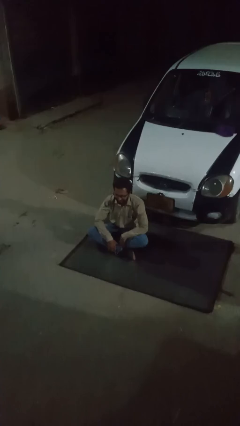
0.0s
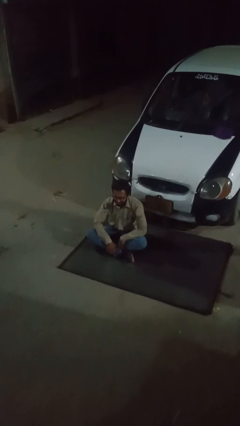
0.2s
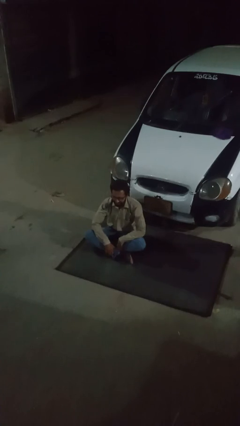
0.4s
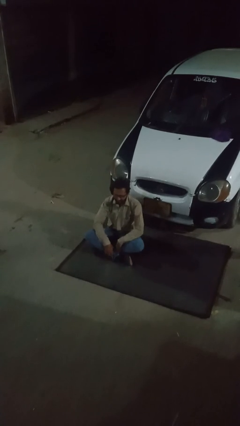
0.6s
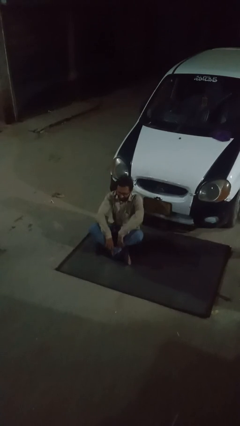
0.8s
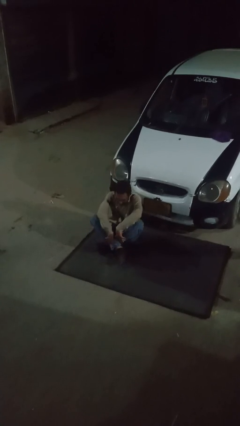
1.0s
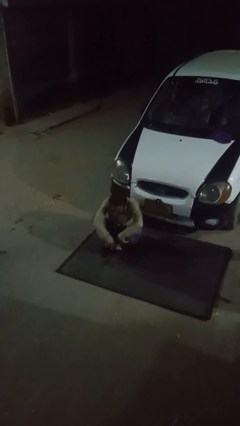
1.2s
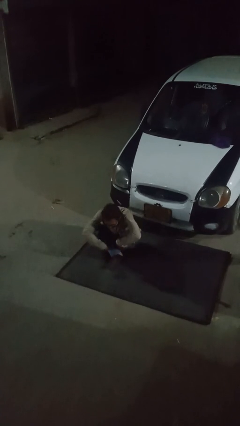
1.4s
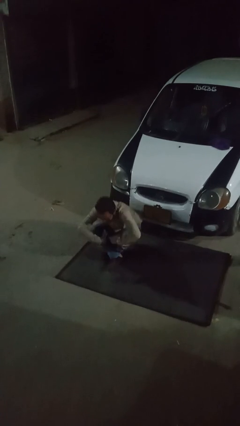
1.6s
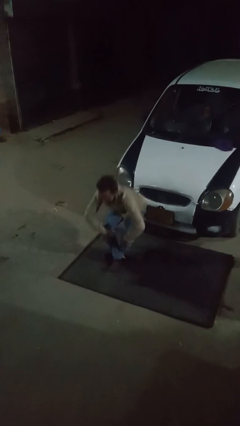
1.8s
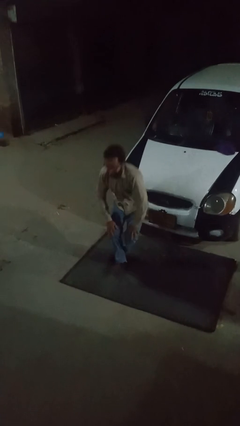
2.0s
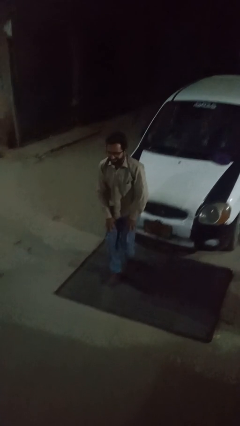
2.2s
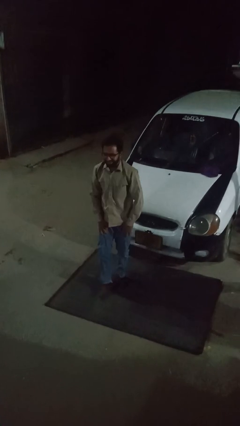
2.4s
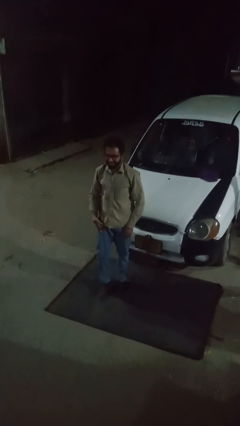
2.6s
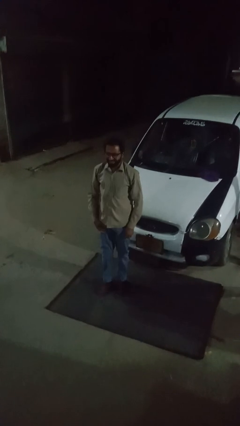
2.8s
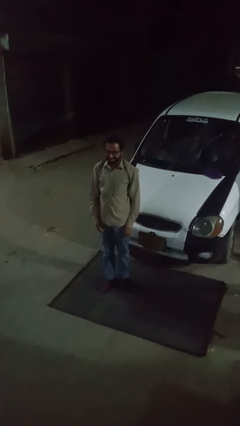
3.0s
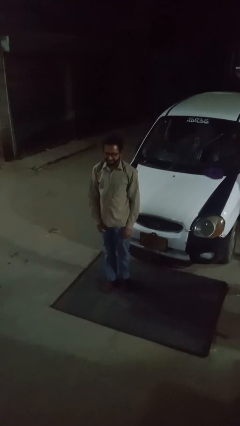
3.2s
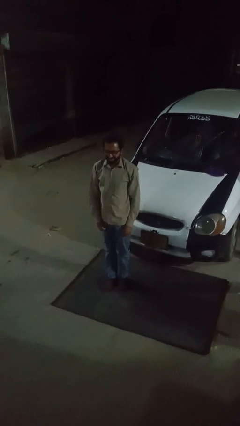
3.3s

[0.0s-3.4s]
person stands up from floor

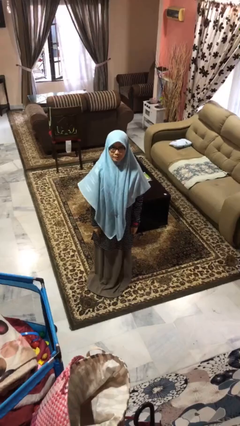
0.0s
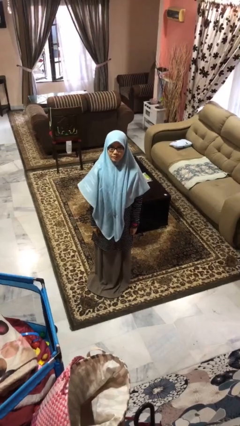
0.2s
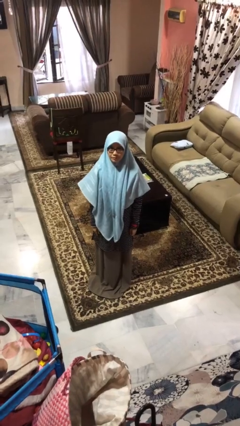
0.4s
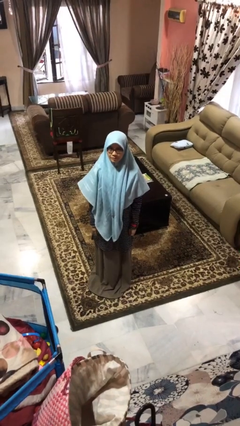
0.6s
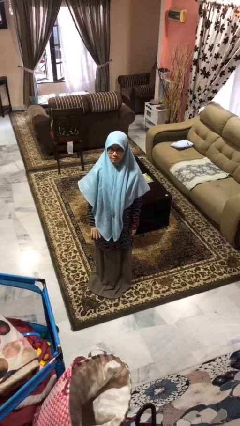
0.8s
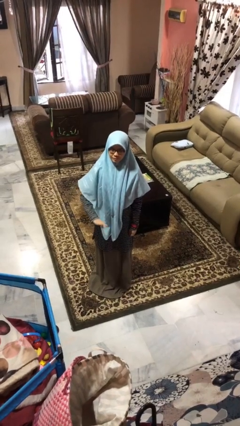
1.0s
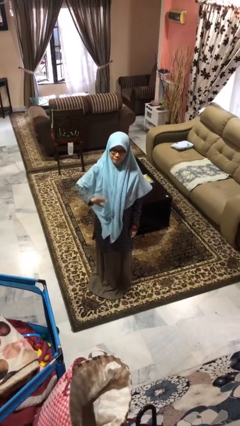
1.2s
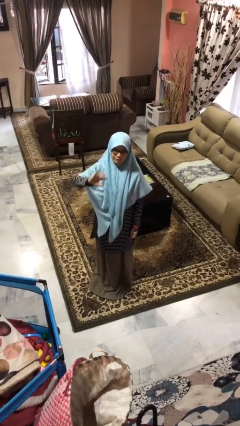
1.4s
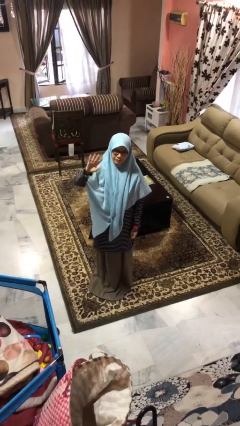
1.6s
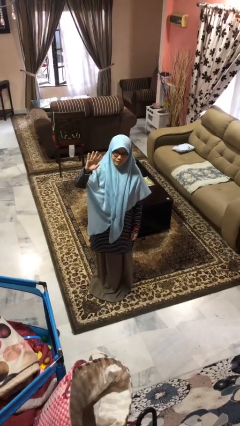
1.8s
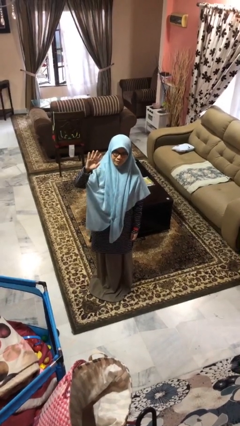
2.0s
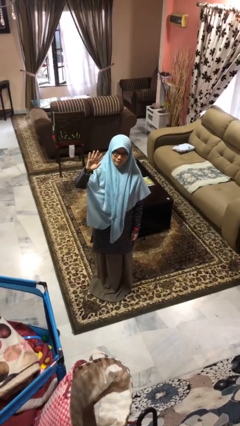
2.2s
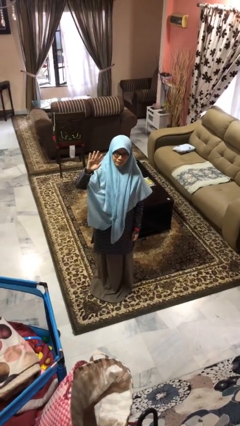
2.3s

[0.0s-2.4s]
person gestures swipe up

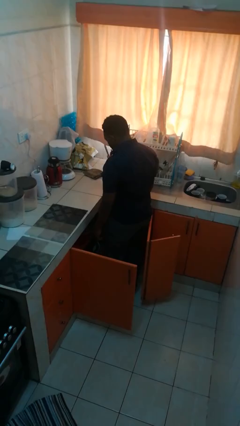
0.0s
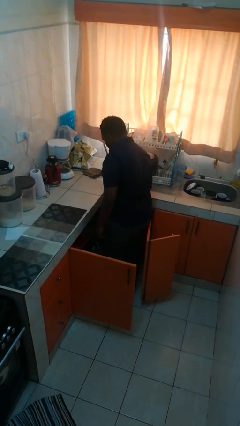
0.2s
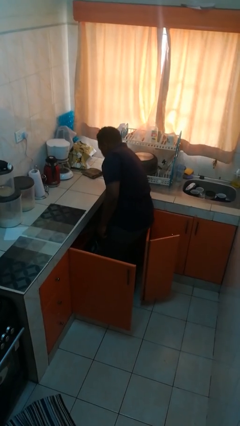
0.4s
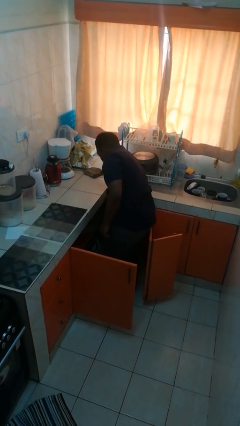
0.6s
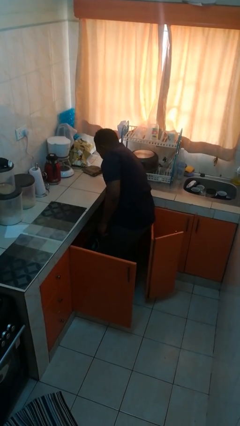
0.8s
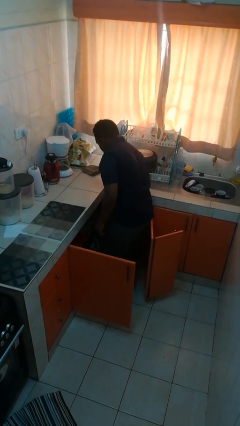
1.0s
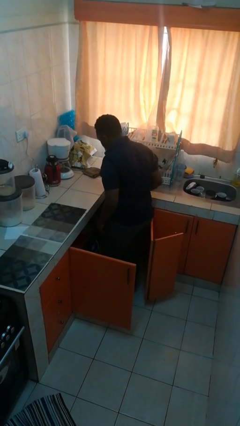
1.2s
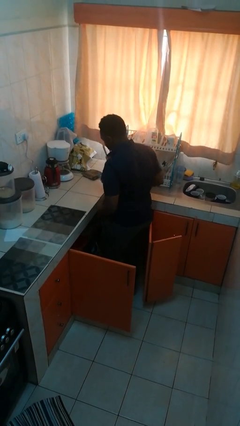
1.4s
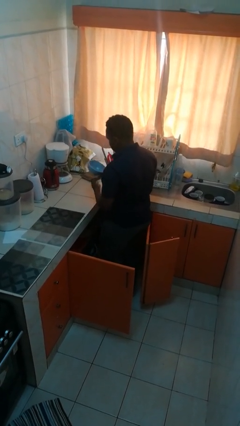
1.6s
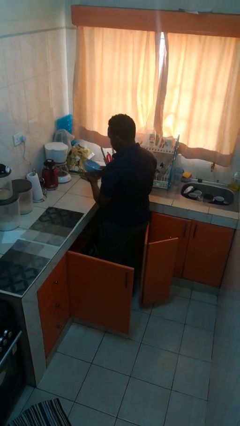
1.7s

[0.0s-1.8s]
person takes object from cabinet

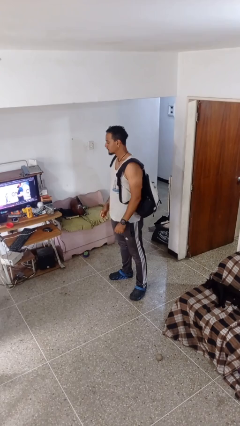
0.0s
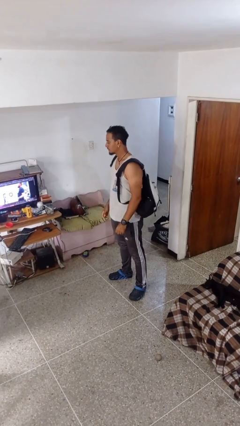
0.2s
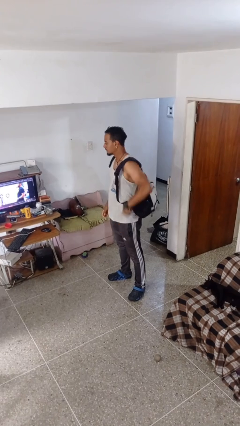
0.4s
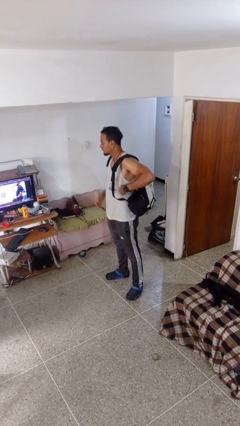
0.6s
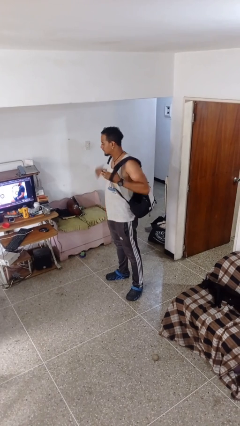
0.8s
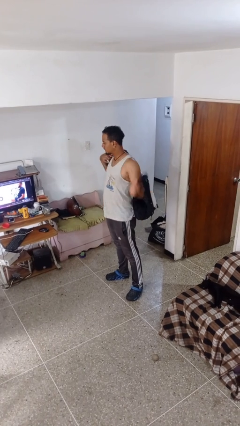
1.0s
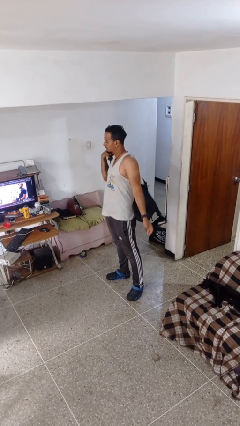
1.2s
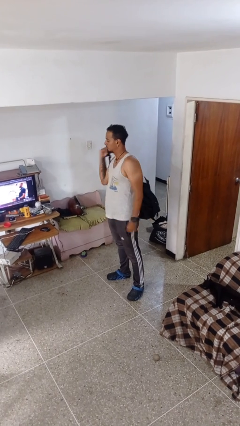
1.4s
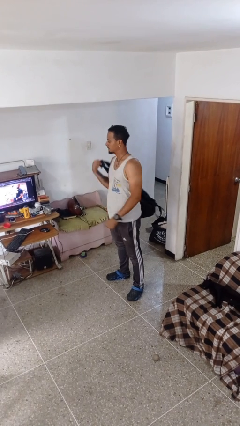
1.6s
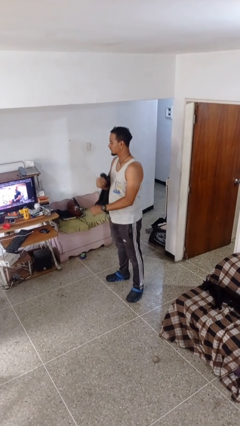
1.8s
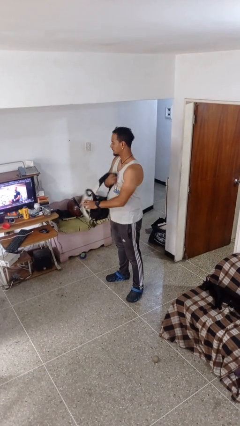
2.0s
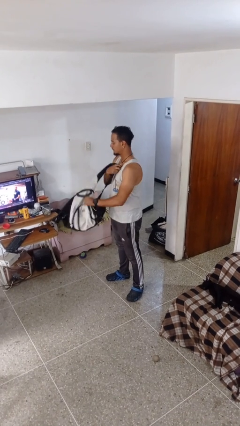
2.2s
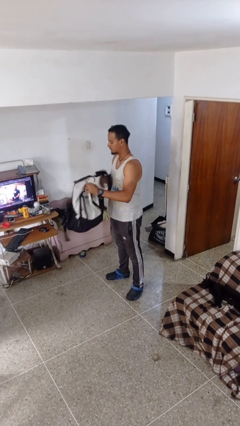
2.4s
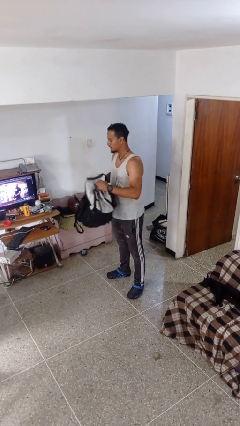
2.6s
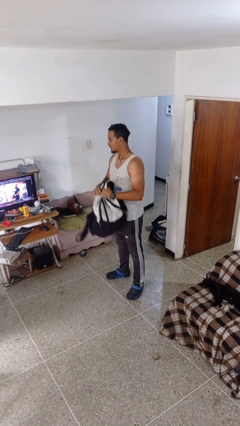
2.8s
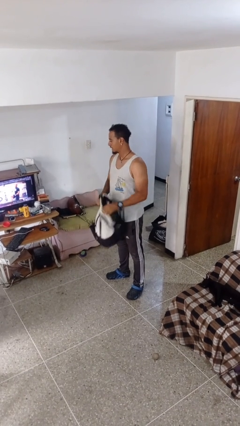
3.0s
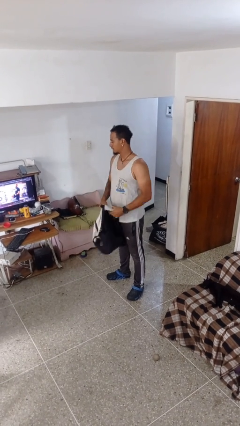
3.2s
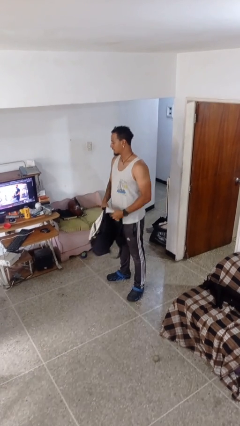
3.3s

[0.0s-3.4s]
person takes off backpack

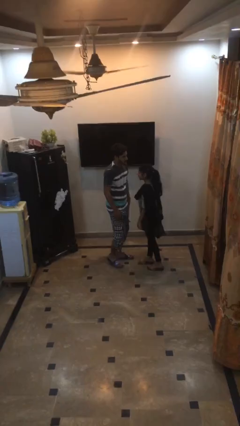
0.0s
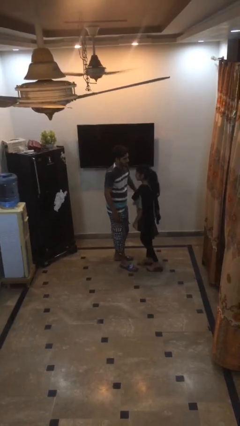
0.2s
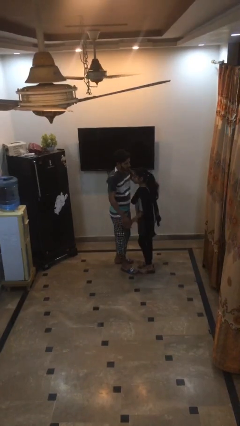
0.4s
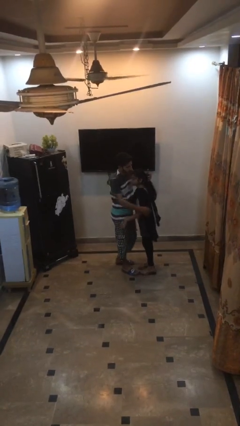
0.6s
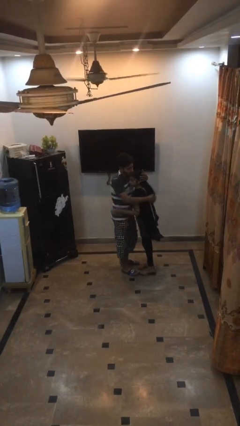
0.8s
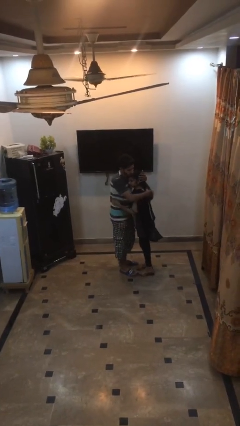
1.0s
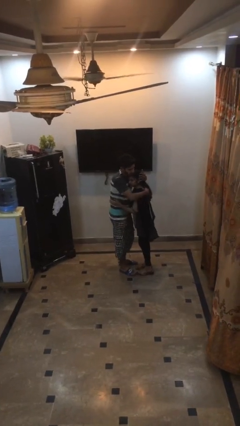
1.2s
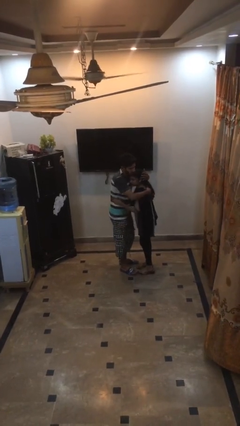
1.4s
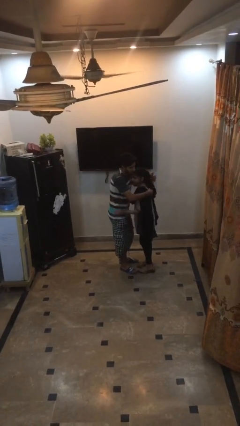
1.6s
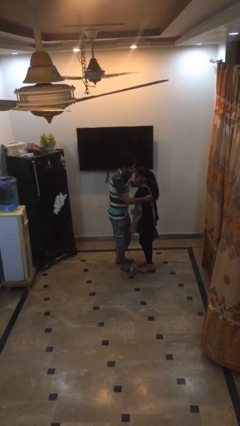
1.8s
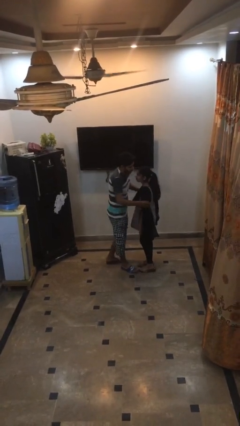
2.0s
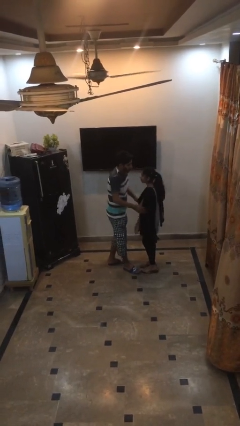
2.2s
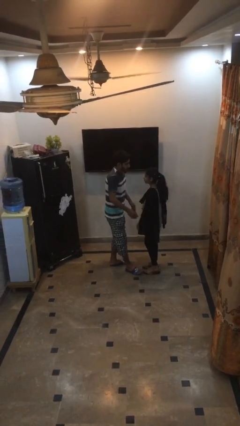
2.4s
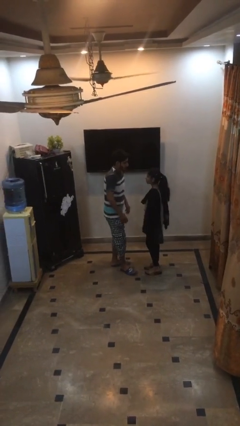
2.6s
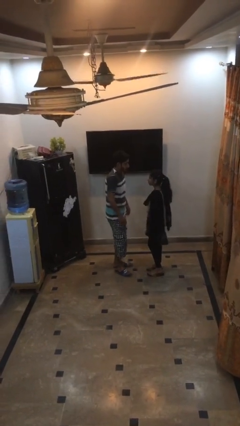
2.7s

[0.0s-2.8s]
person embraces person

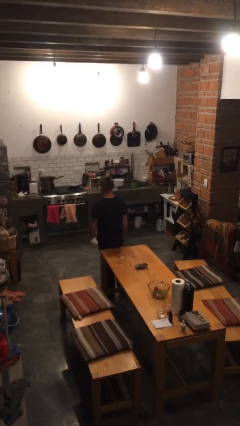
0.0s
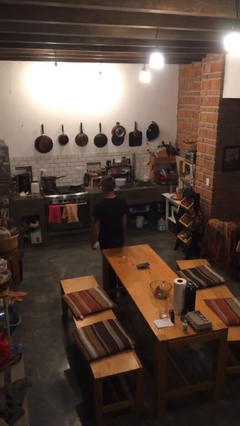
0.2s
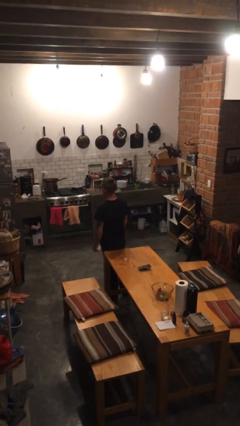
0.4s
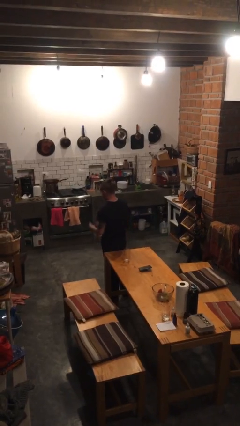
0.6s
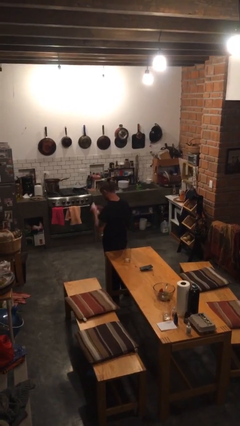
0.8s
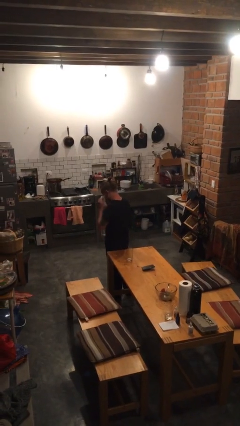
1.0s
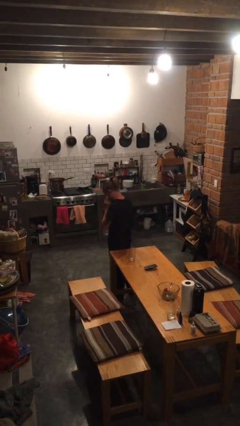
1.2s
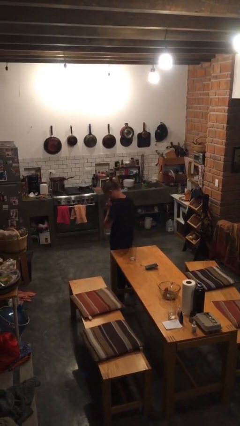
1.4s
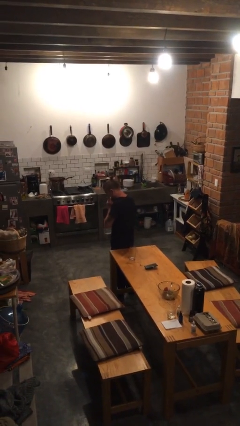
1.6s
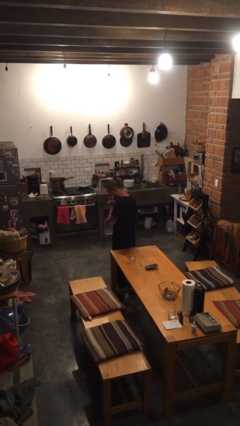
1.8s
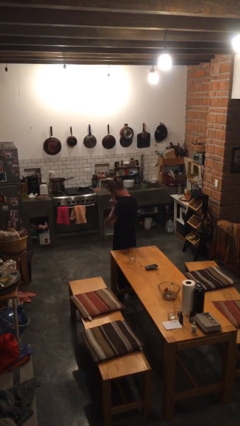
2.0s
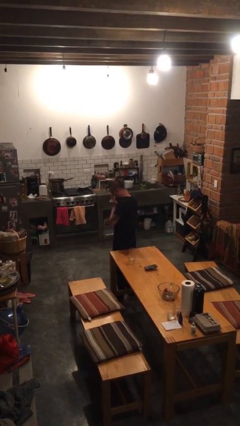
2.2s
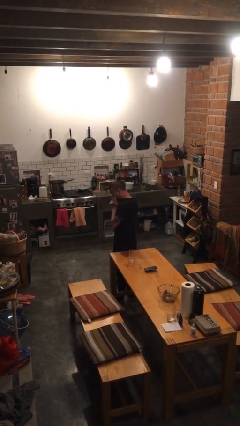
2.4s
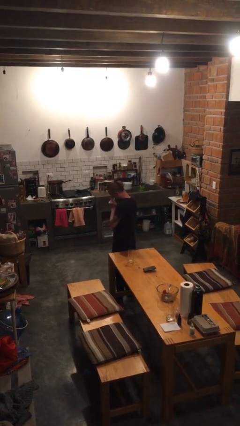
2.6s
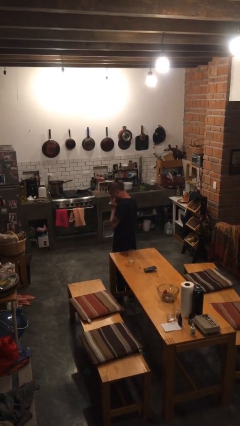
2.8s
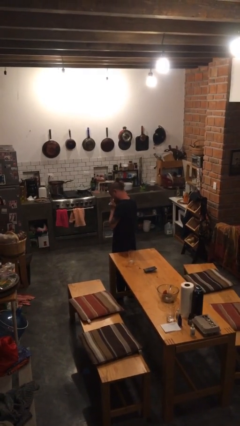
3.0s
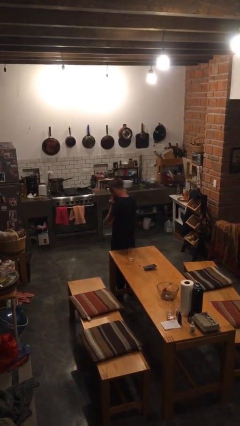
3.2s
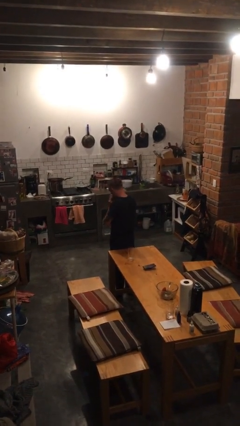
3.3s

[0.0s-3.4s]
person blows nose

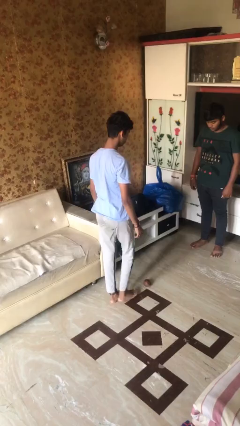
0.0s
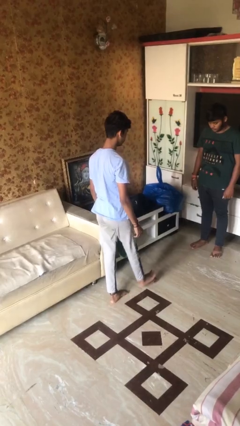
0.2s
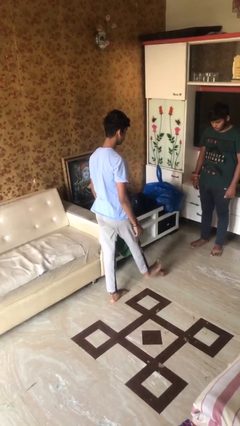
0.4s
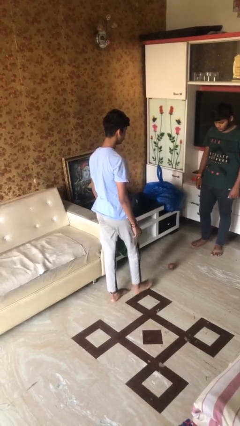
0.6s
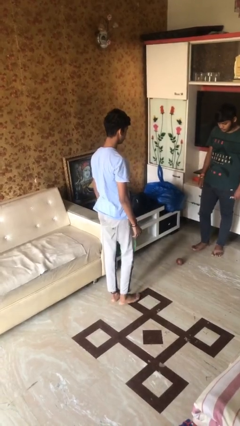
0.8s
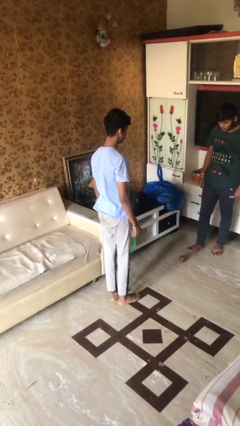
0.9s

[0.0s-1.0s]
person kicks object to person
